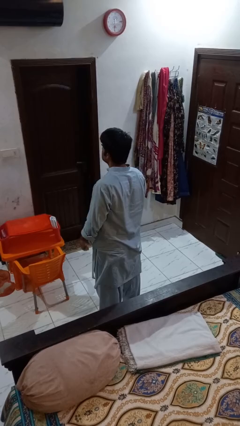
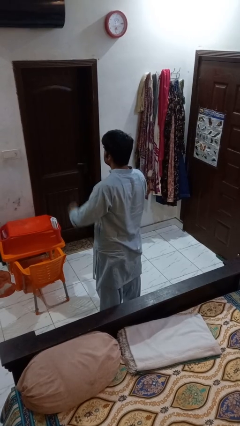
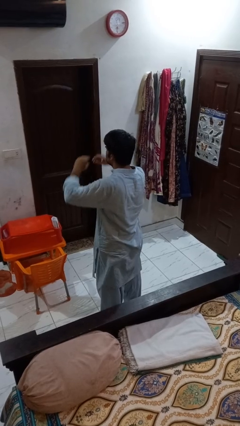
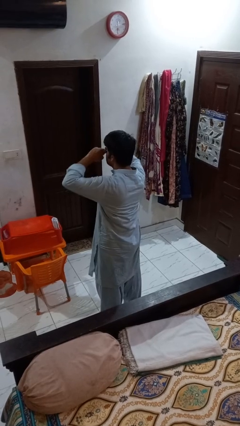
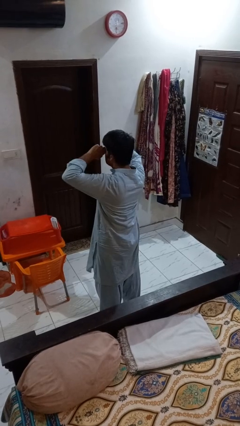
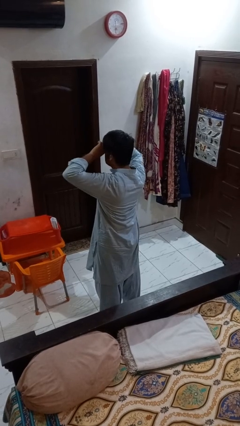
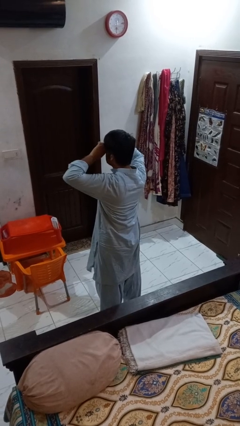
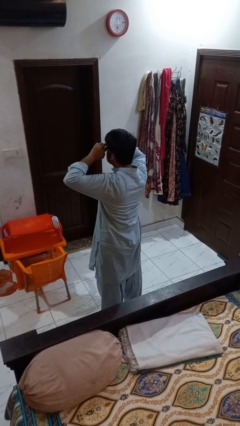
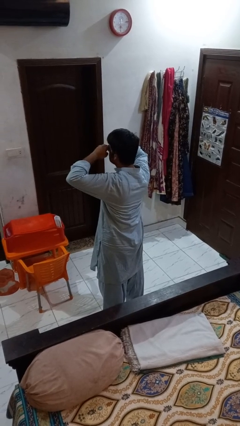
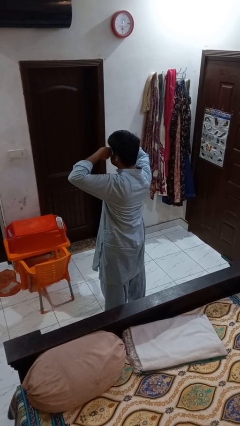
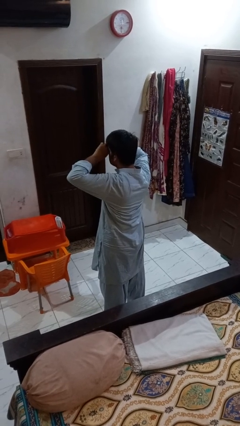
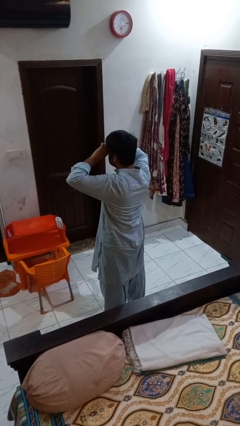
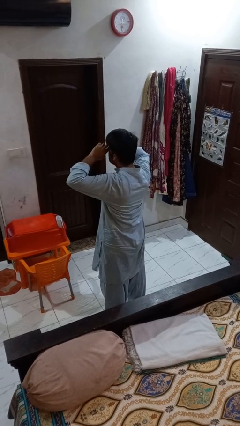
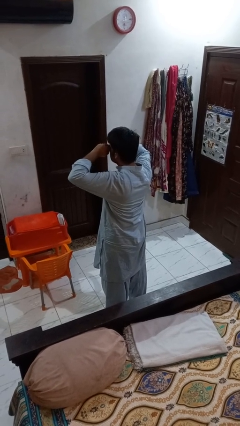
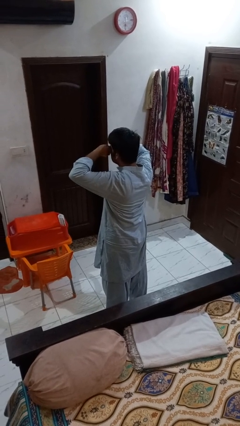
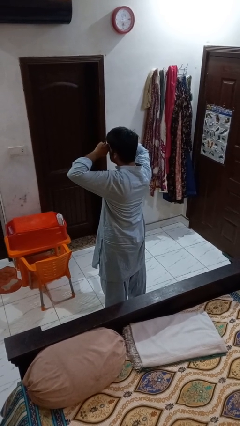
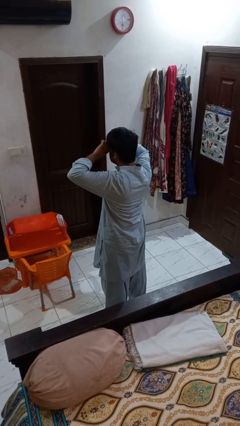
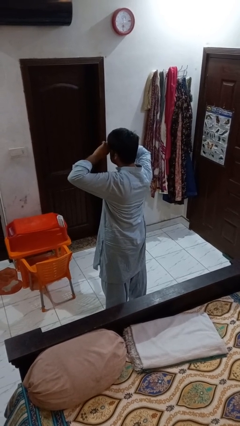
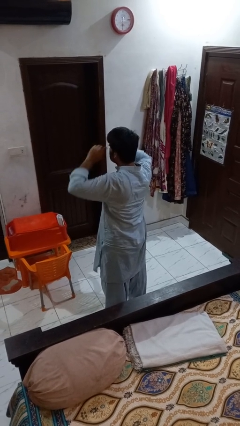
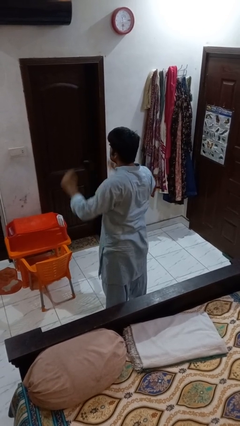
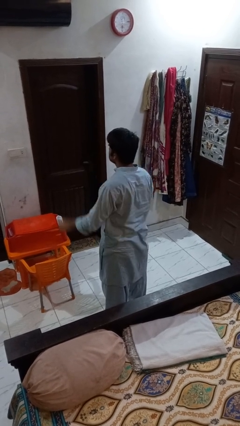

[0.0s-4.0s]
person rubs eyes

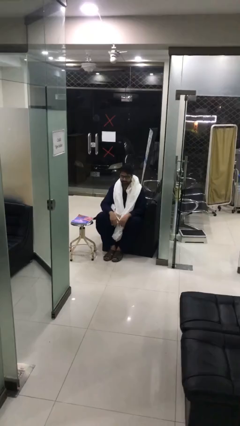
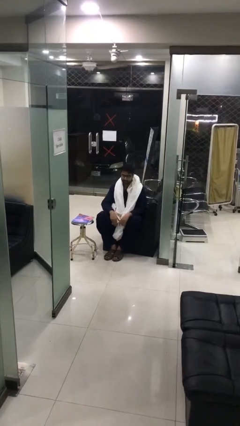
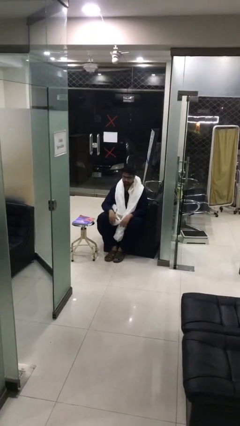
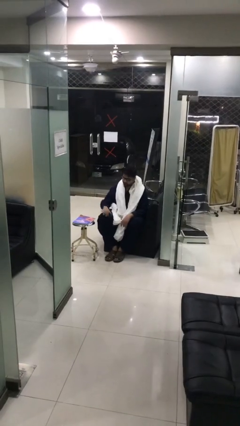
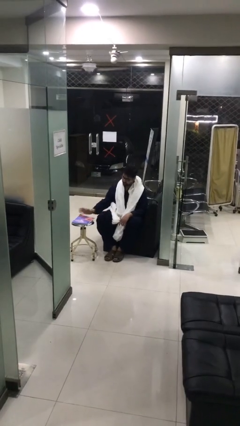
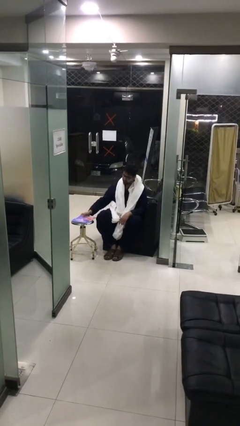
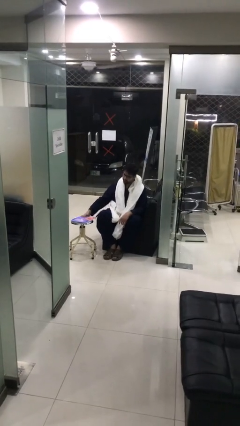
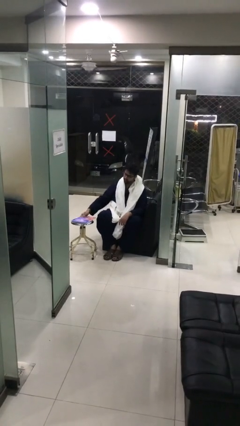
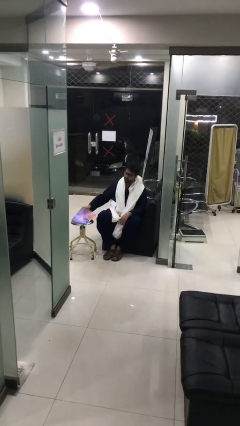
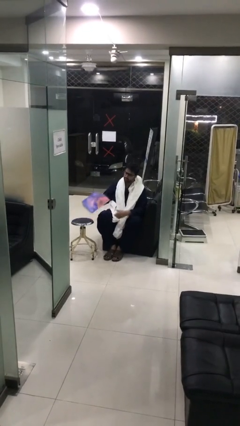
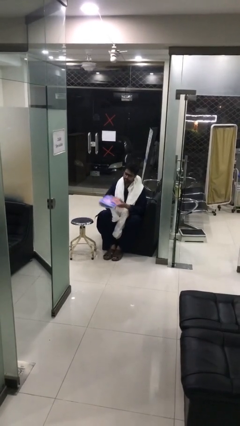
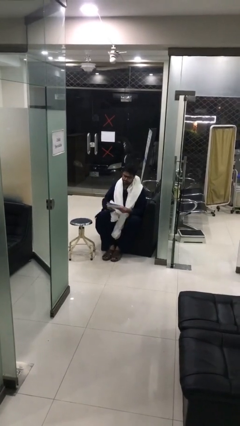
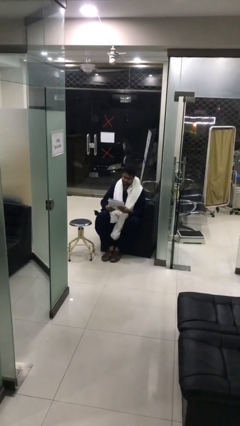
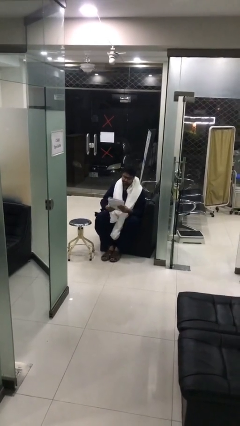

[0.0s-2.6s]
person picks up object from table

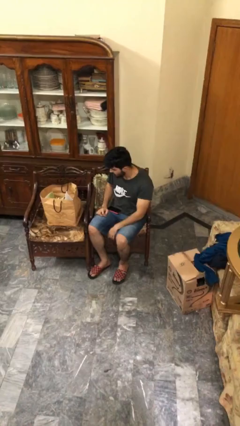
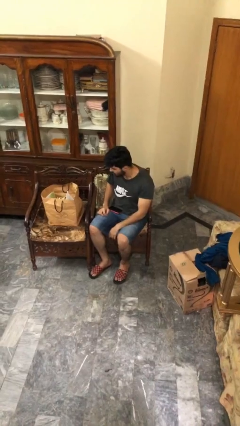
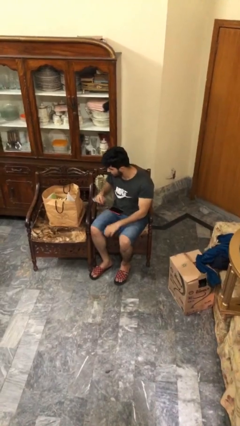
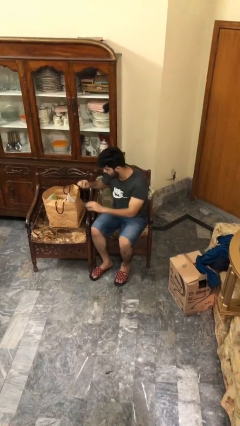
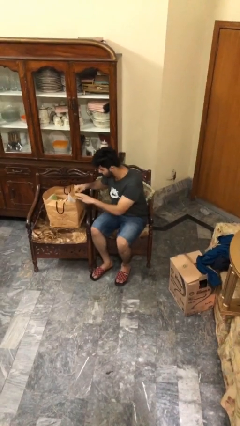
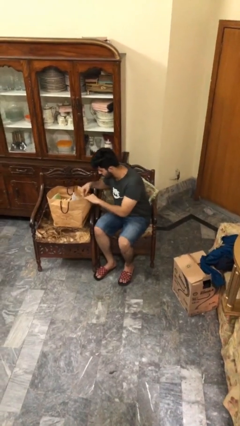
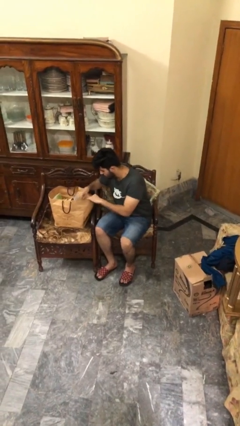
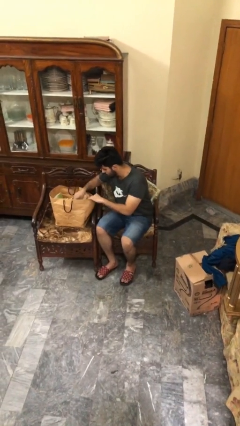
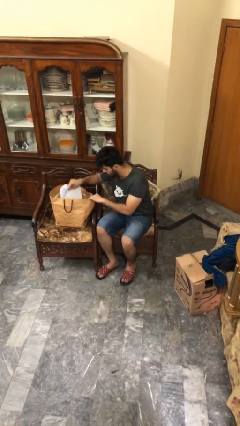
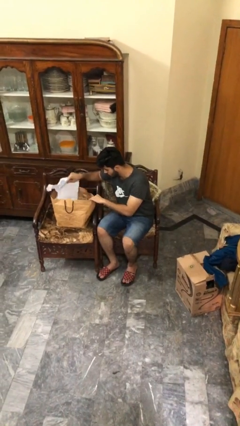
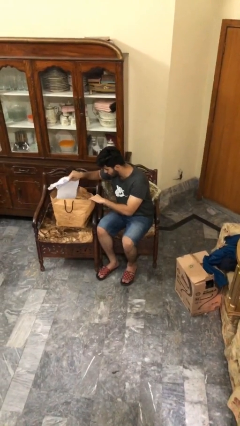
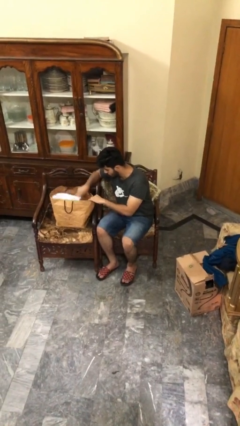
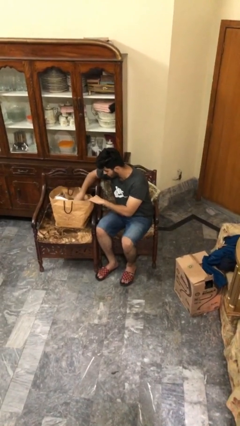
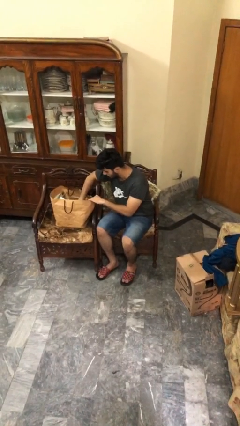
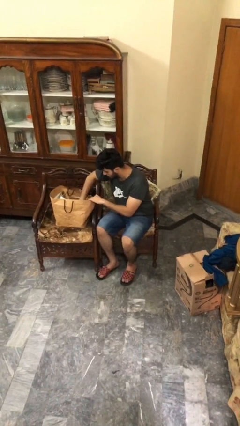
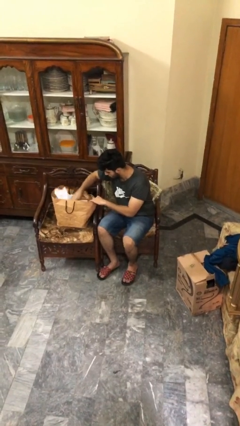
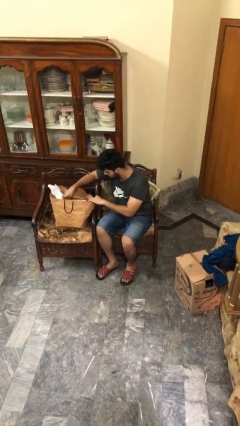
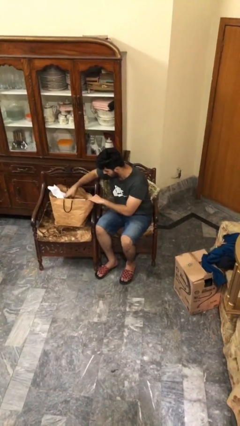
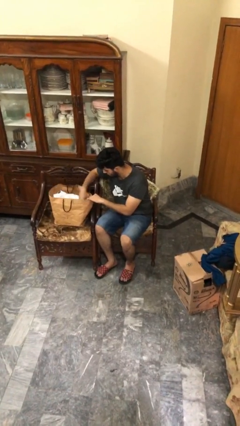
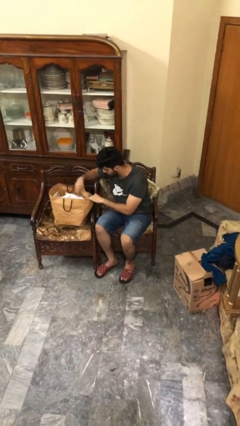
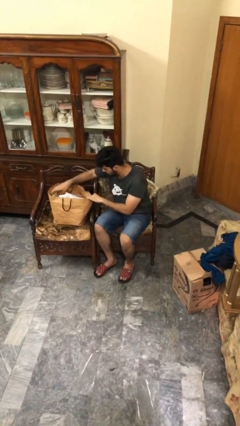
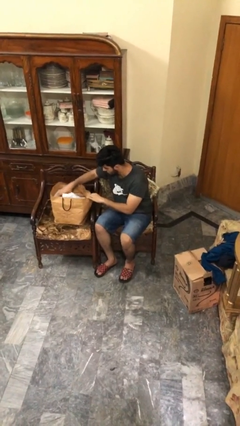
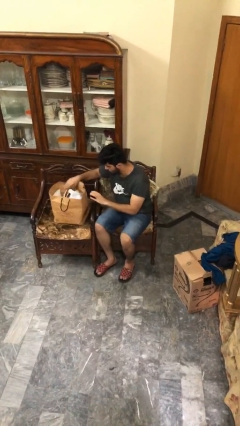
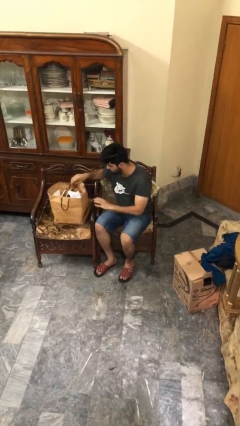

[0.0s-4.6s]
person searches in bag

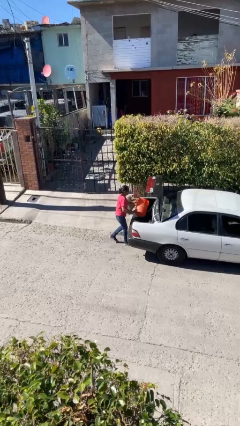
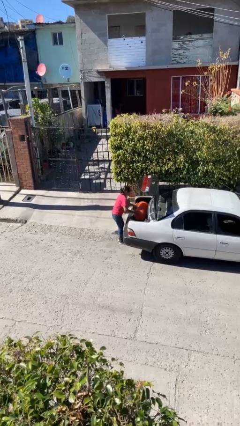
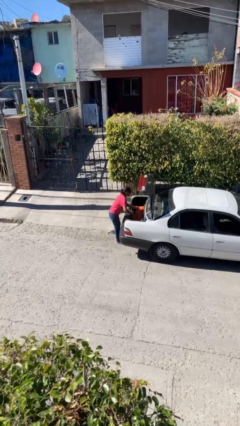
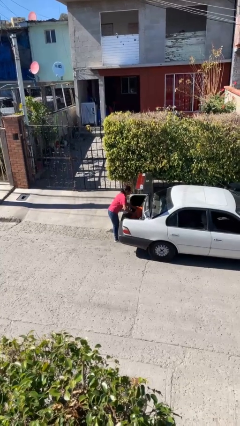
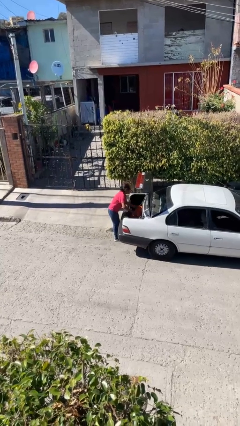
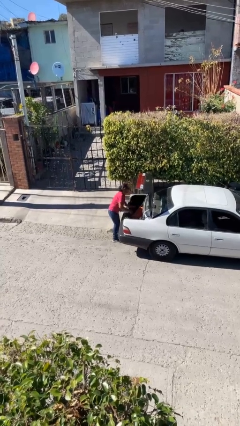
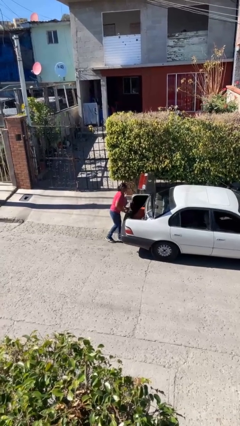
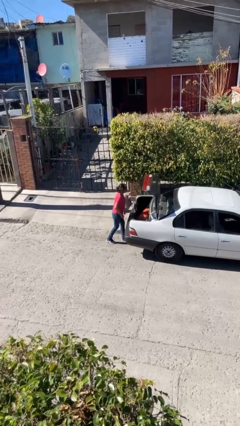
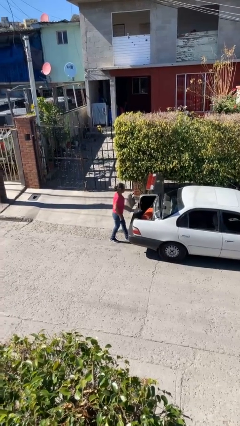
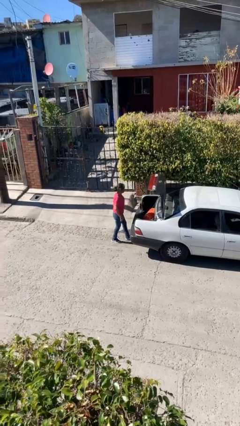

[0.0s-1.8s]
person loads car

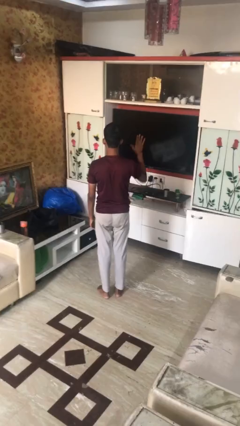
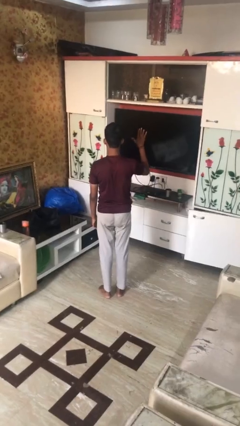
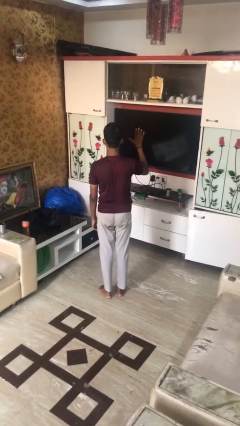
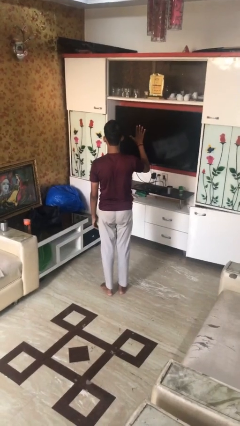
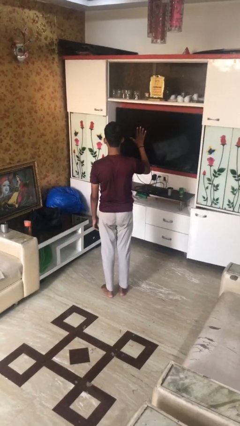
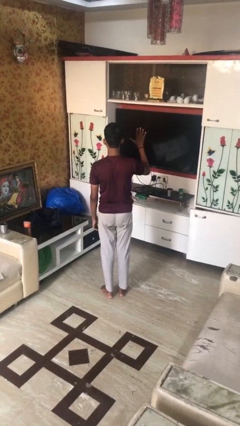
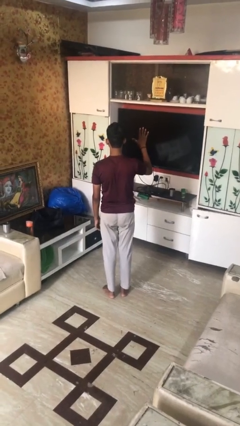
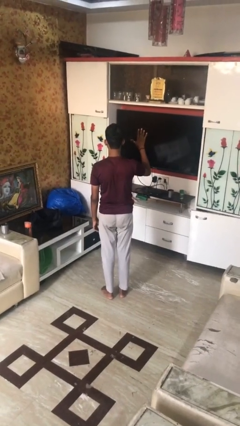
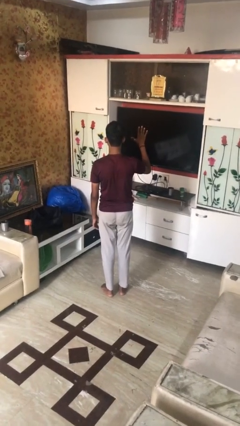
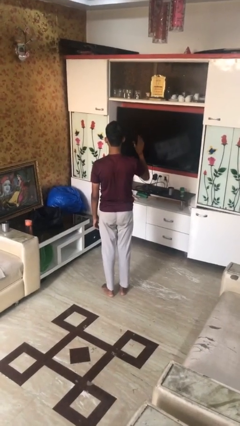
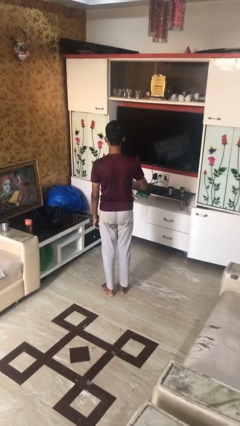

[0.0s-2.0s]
person gestures number five

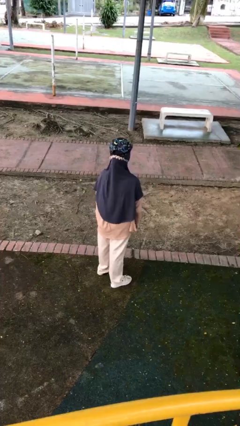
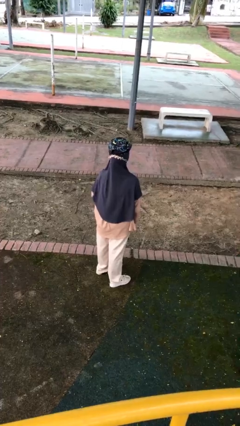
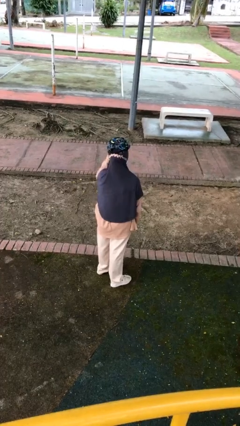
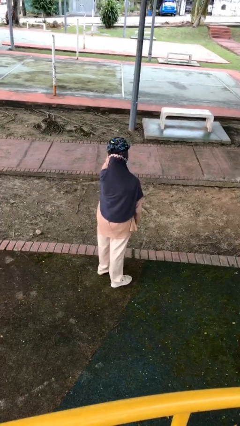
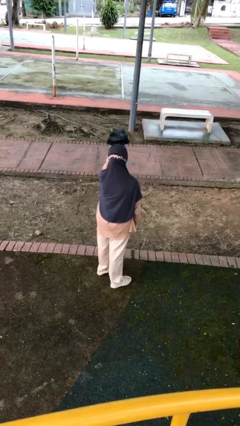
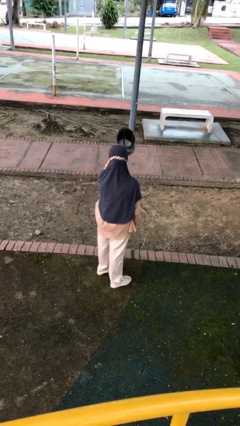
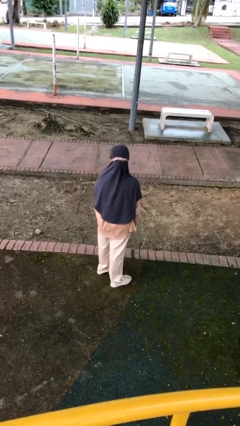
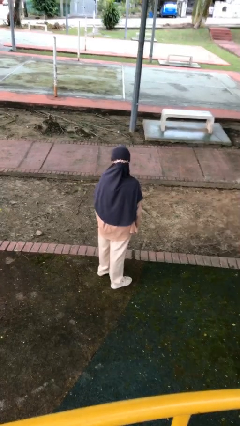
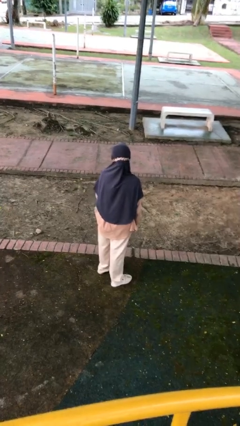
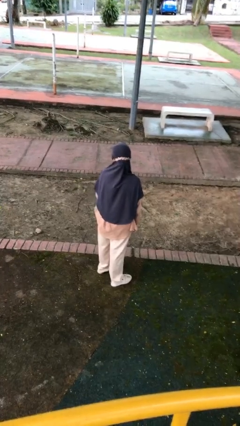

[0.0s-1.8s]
person takes off hat

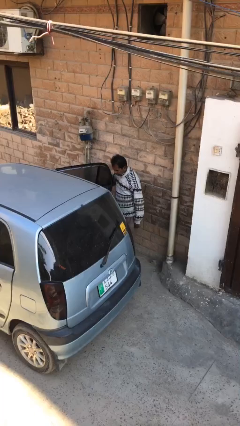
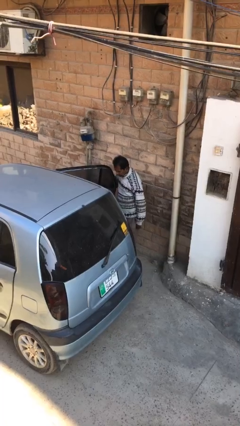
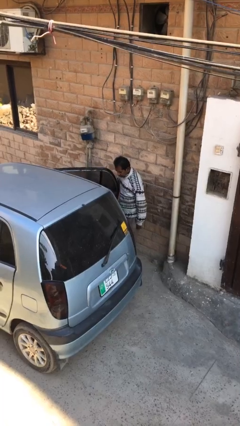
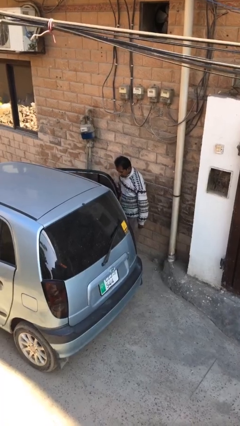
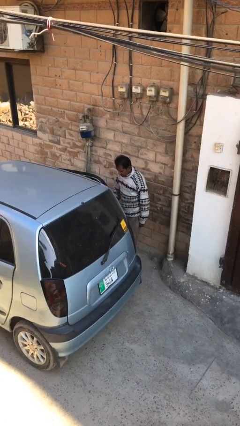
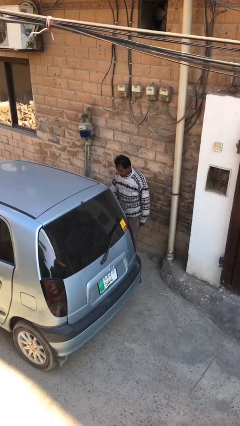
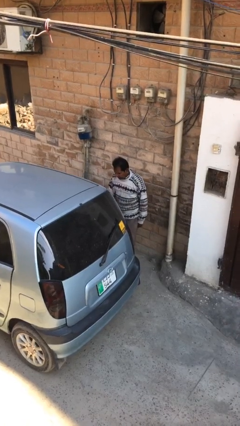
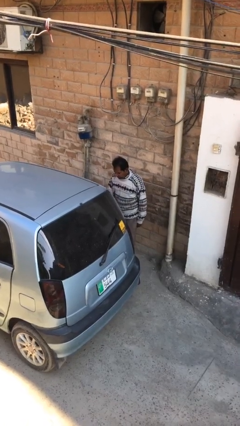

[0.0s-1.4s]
person closes car door
